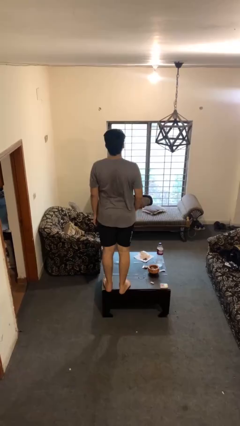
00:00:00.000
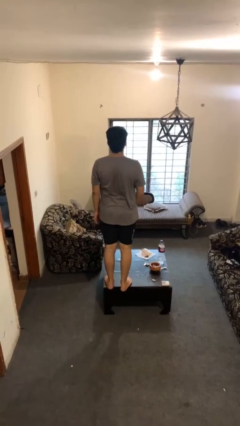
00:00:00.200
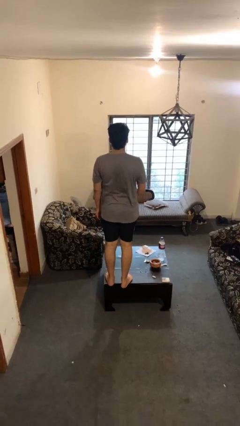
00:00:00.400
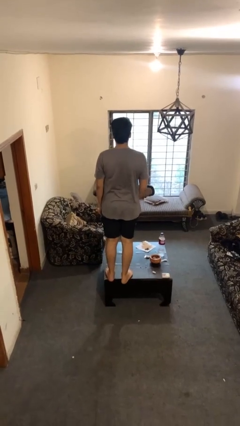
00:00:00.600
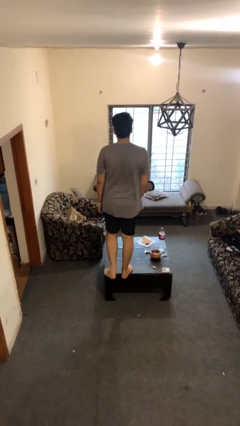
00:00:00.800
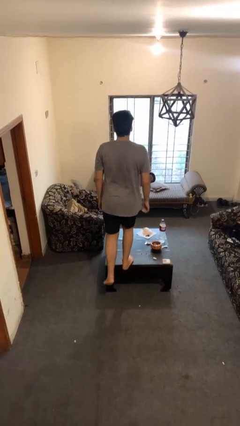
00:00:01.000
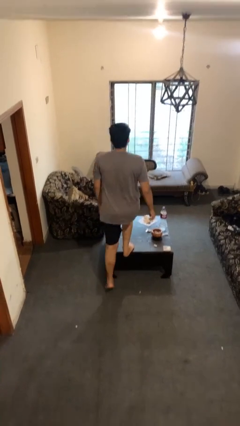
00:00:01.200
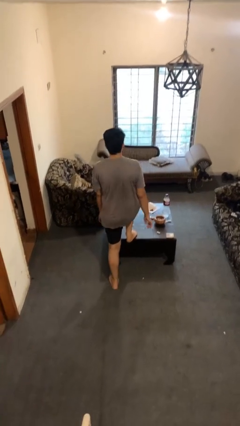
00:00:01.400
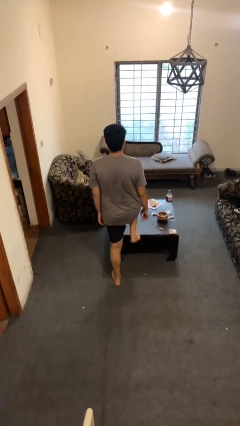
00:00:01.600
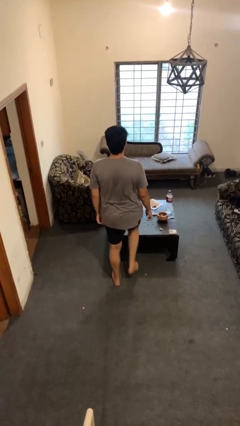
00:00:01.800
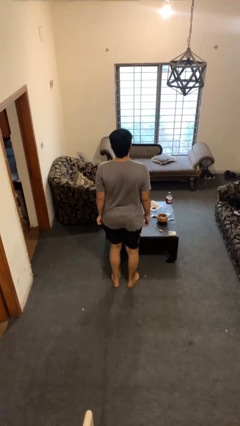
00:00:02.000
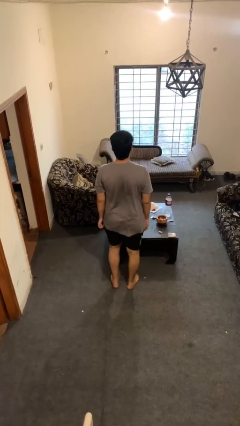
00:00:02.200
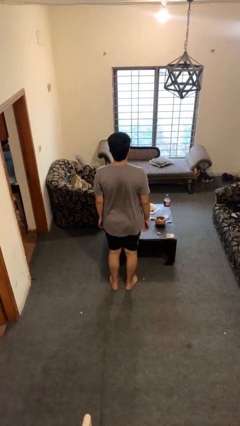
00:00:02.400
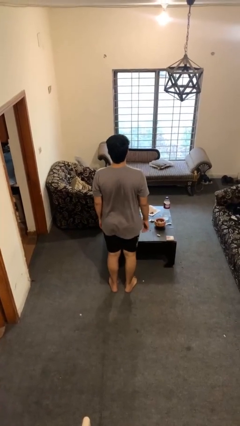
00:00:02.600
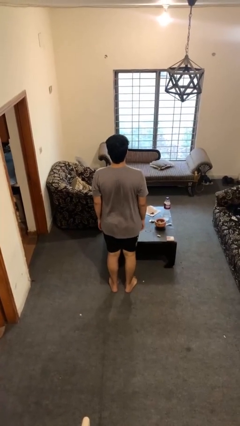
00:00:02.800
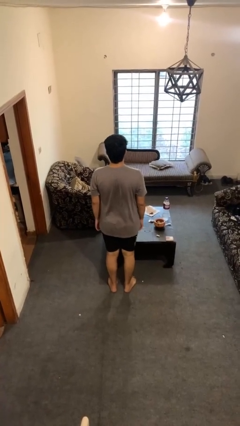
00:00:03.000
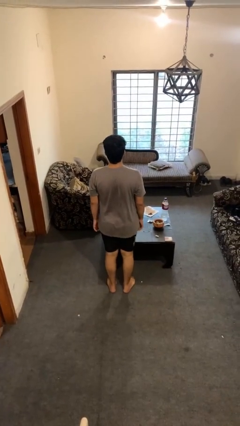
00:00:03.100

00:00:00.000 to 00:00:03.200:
person climbs off table

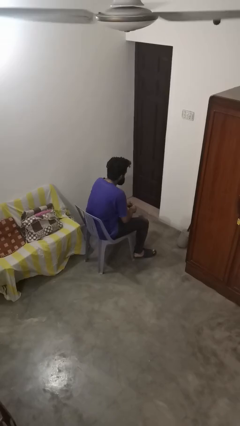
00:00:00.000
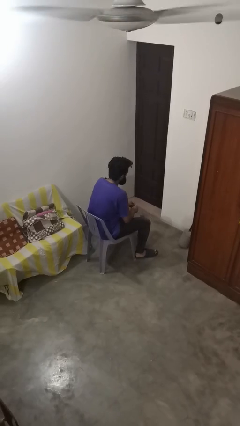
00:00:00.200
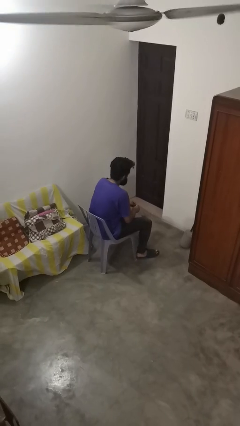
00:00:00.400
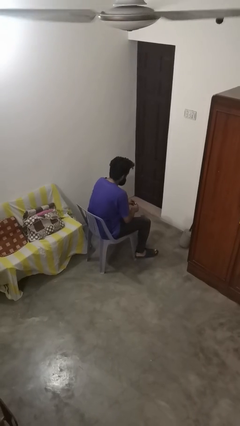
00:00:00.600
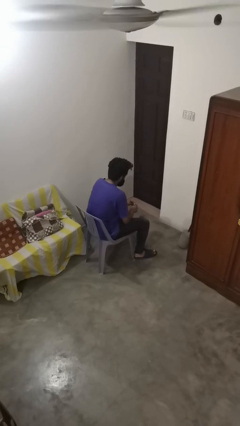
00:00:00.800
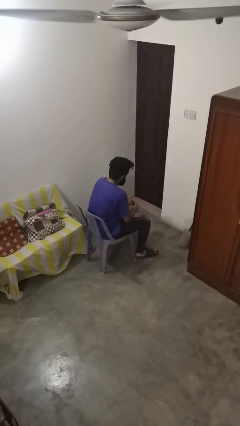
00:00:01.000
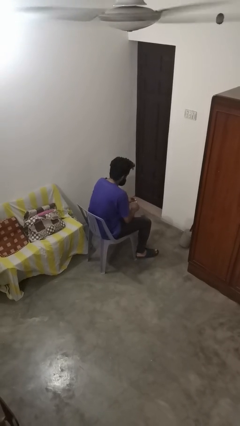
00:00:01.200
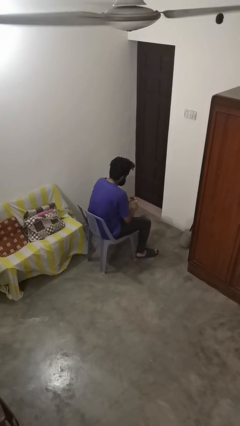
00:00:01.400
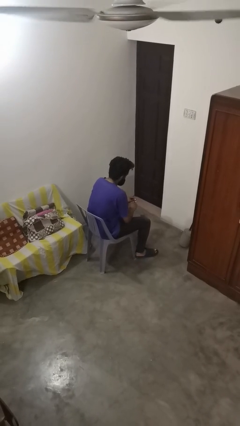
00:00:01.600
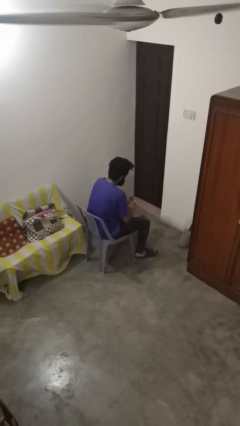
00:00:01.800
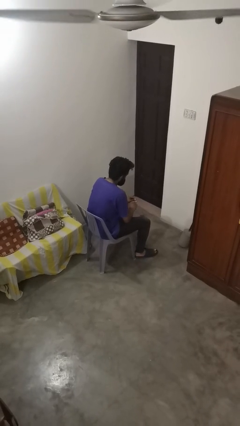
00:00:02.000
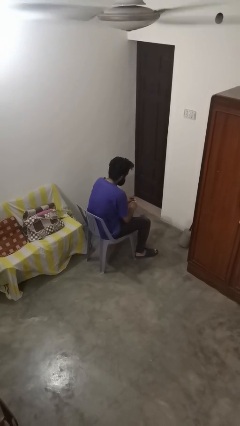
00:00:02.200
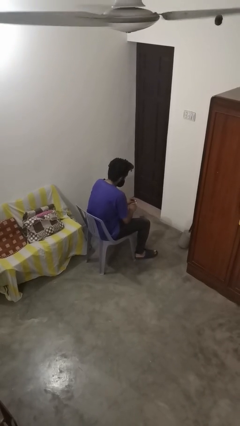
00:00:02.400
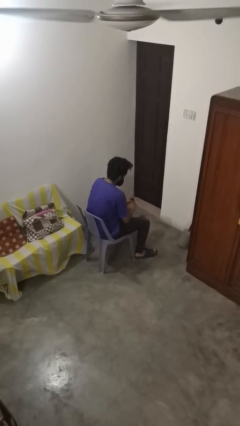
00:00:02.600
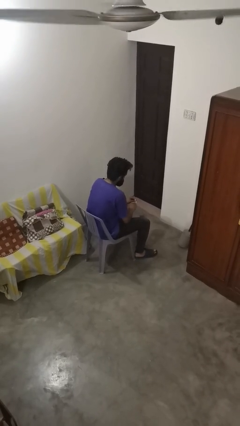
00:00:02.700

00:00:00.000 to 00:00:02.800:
person paints fingernails

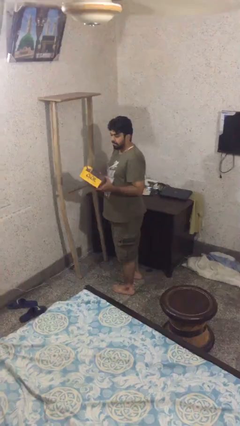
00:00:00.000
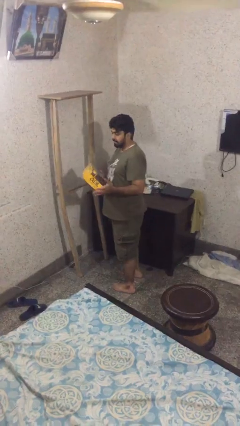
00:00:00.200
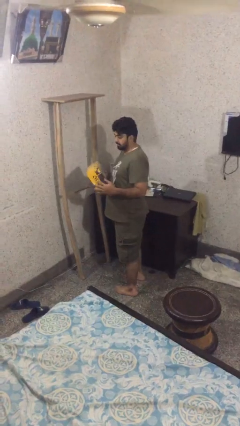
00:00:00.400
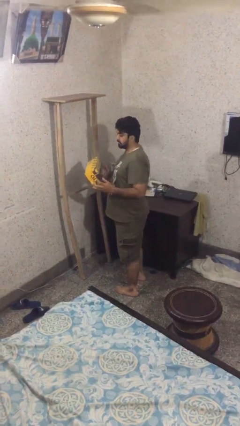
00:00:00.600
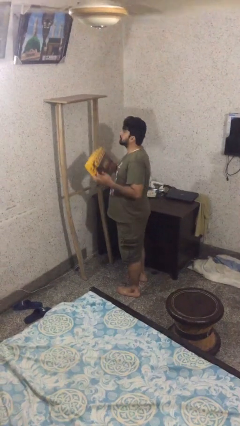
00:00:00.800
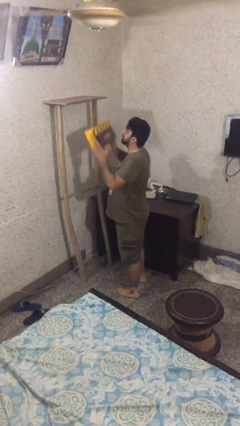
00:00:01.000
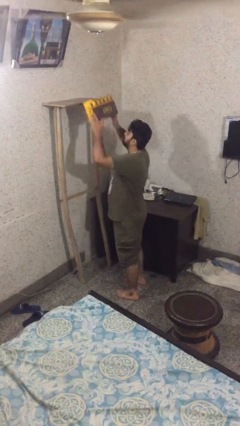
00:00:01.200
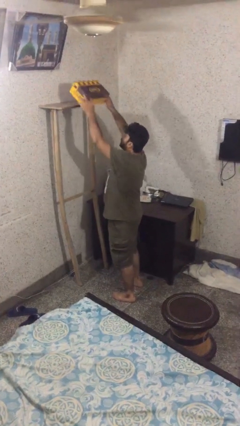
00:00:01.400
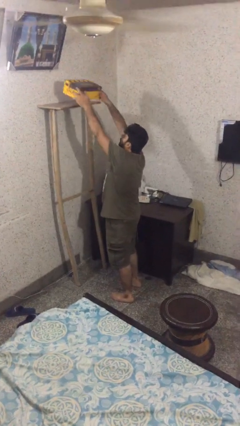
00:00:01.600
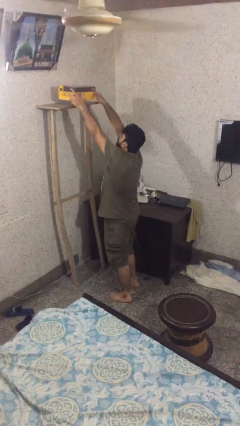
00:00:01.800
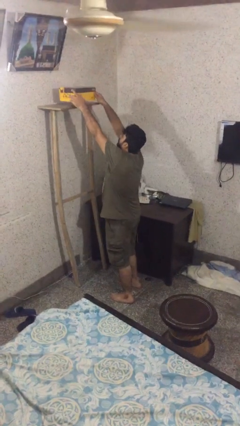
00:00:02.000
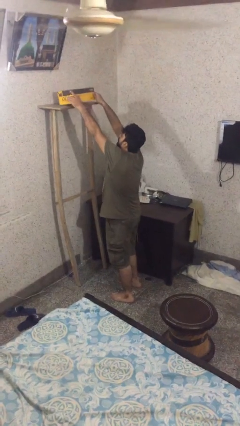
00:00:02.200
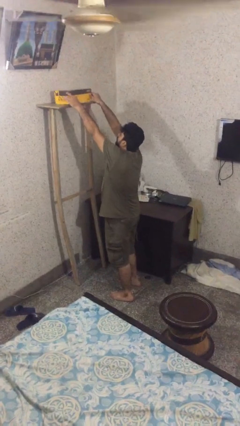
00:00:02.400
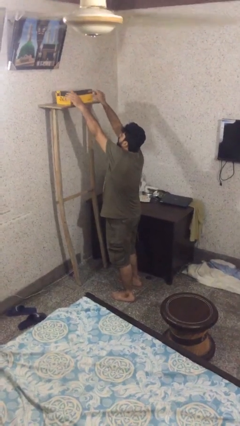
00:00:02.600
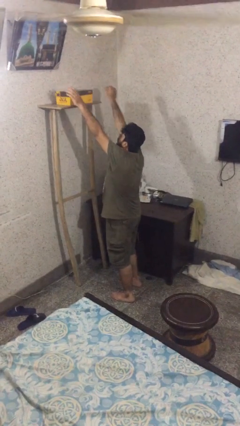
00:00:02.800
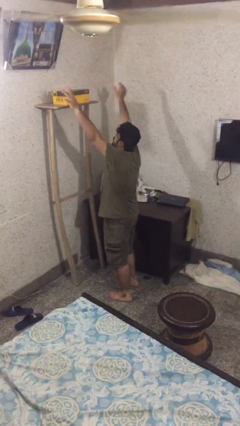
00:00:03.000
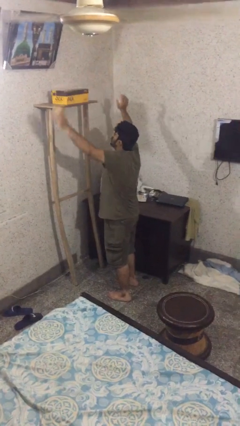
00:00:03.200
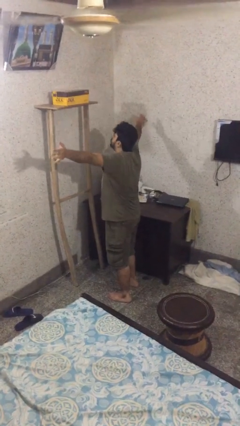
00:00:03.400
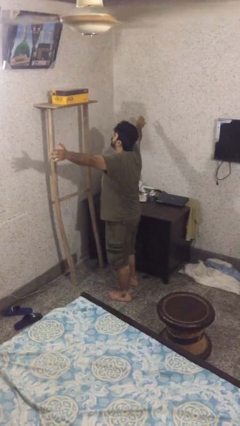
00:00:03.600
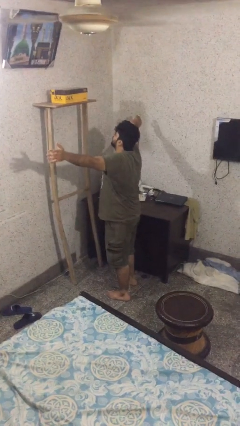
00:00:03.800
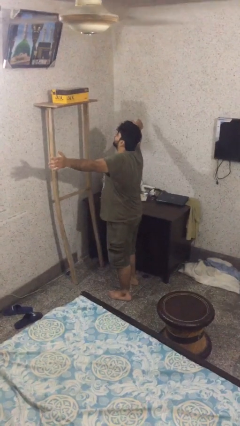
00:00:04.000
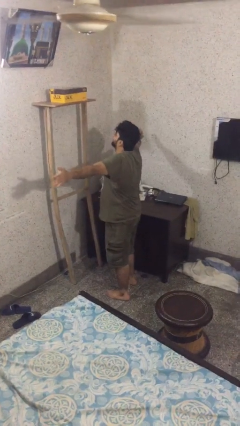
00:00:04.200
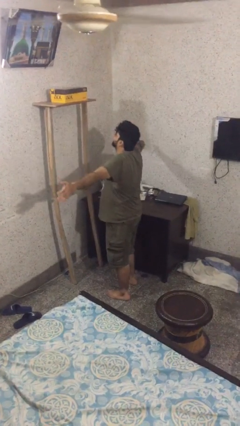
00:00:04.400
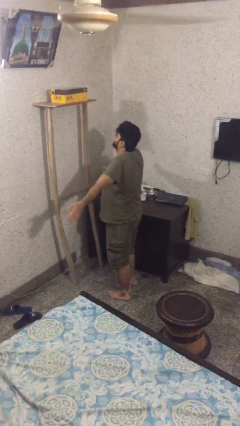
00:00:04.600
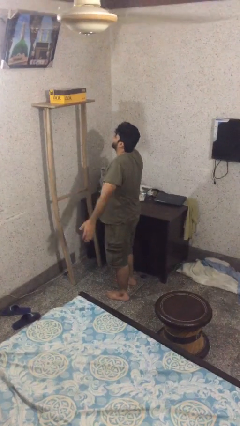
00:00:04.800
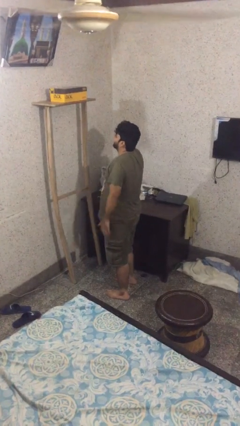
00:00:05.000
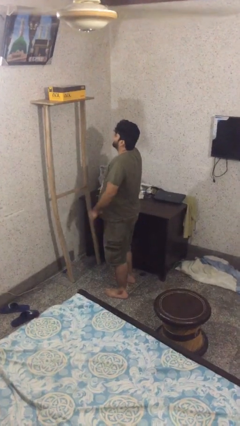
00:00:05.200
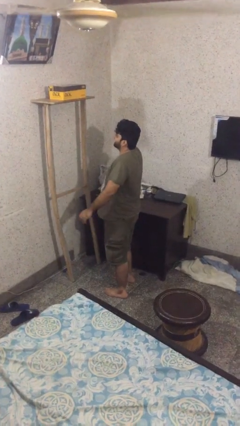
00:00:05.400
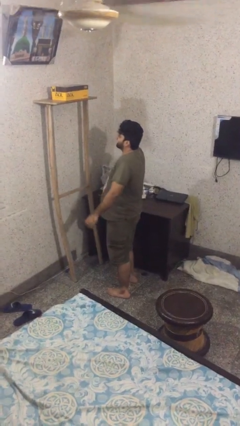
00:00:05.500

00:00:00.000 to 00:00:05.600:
person puts down object on shelf

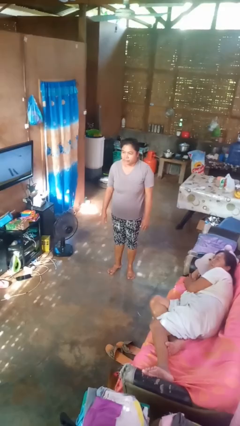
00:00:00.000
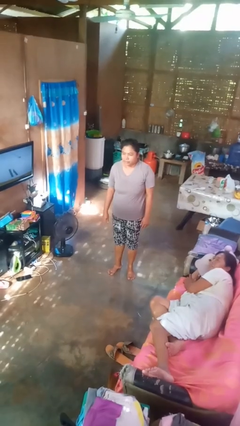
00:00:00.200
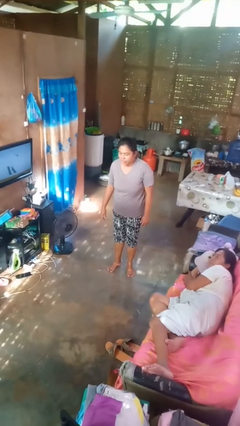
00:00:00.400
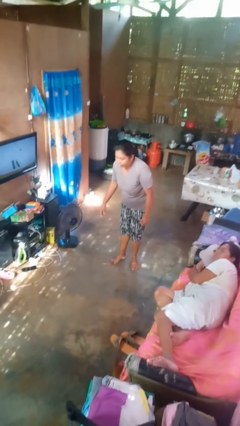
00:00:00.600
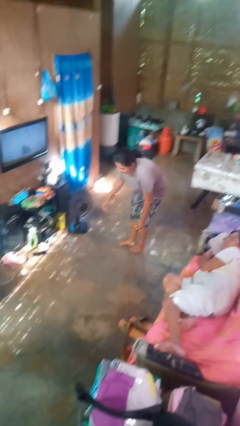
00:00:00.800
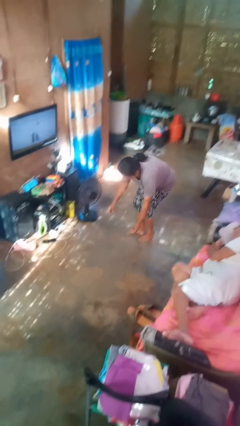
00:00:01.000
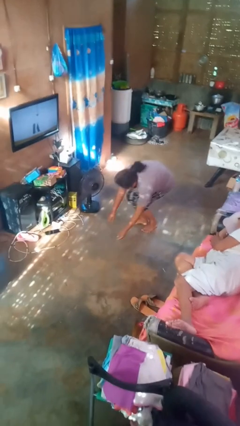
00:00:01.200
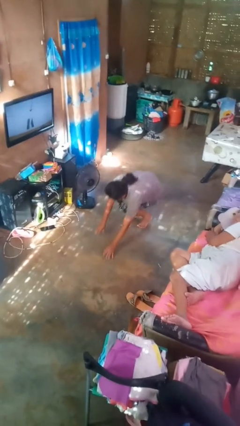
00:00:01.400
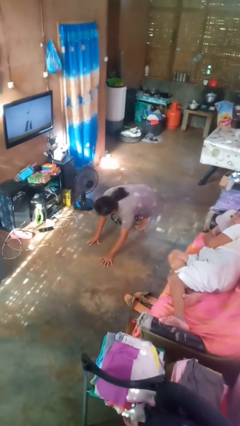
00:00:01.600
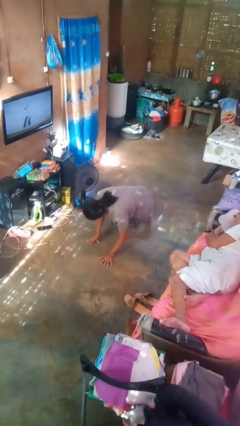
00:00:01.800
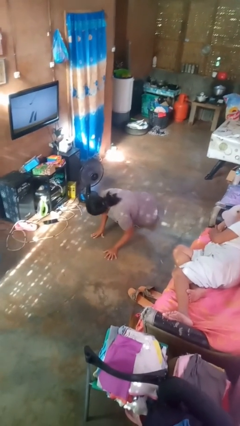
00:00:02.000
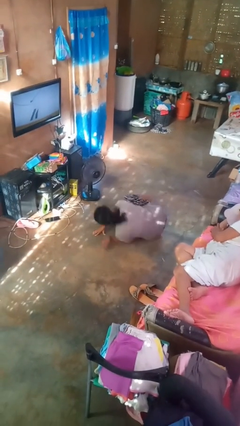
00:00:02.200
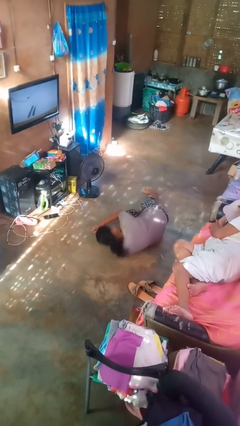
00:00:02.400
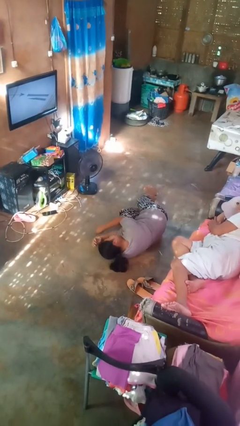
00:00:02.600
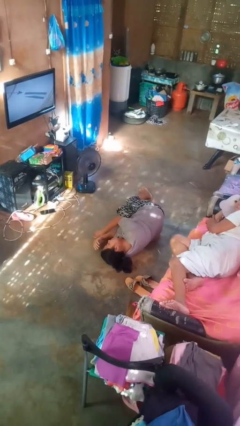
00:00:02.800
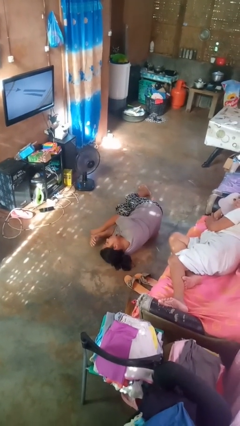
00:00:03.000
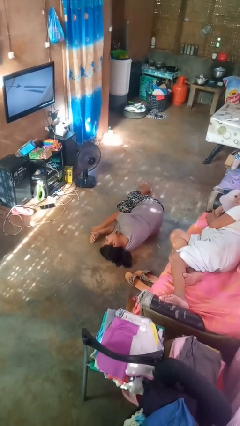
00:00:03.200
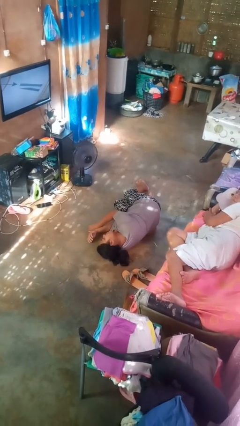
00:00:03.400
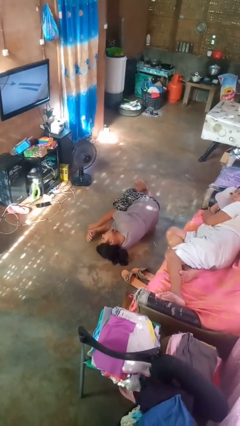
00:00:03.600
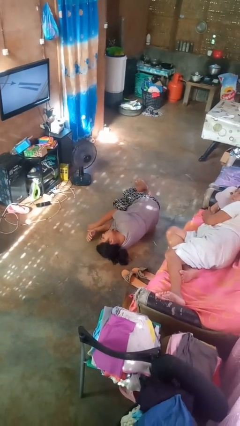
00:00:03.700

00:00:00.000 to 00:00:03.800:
person falls while standing

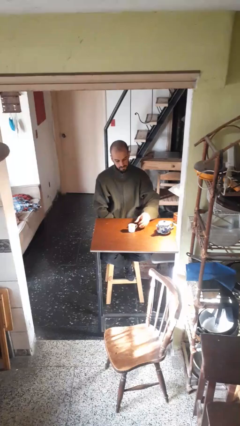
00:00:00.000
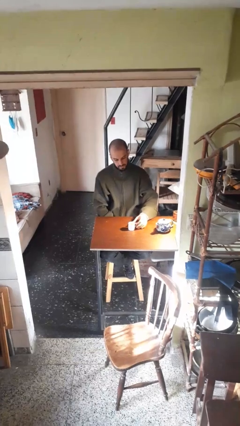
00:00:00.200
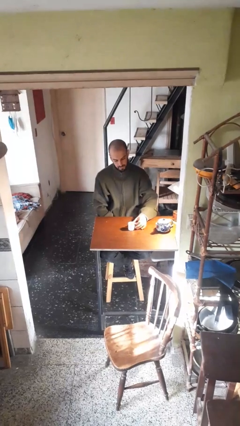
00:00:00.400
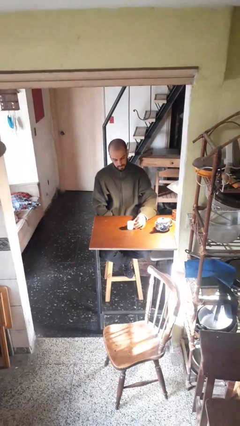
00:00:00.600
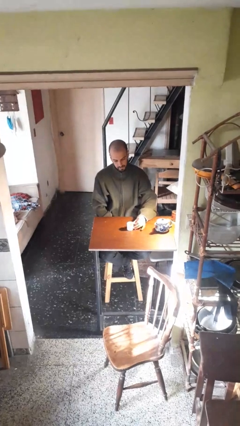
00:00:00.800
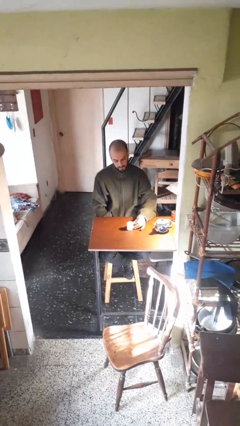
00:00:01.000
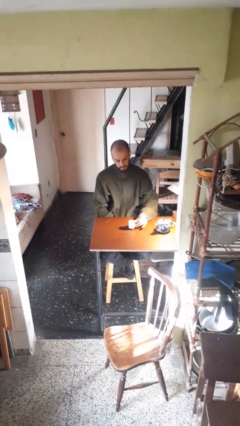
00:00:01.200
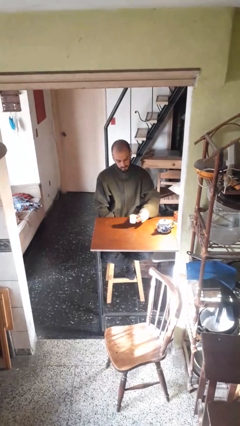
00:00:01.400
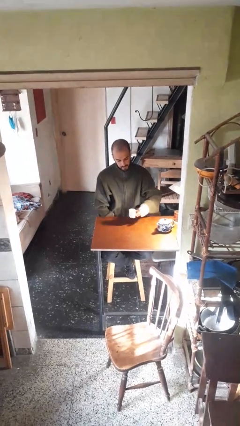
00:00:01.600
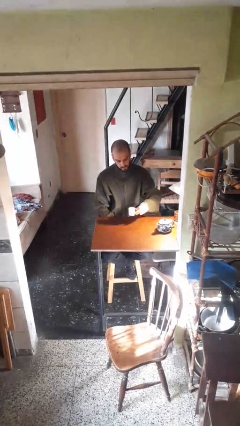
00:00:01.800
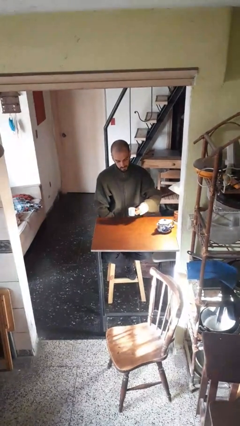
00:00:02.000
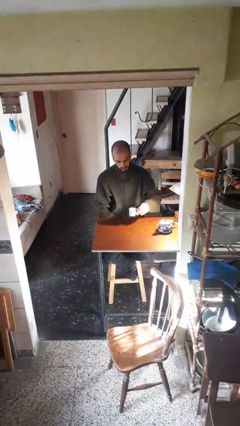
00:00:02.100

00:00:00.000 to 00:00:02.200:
person picks up object from table
